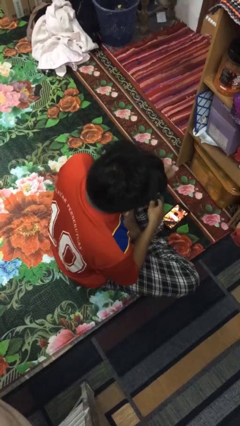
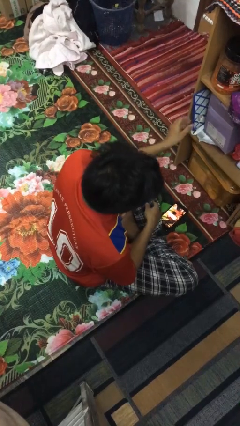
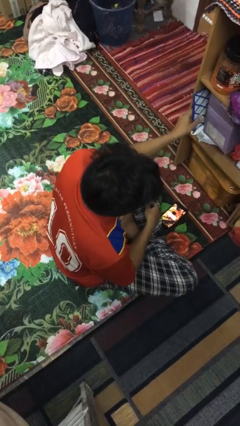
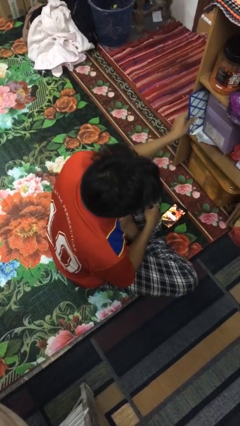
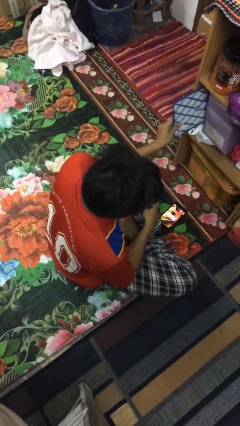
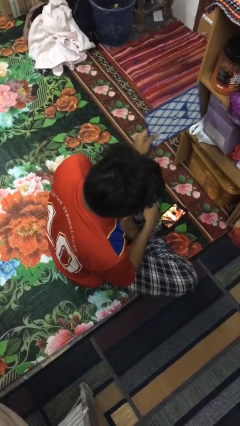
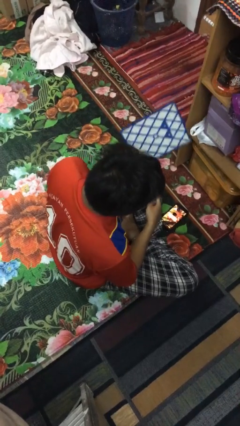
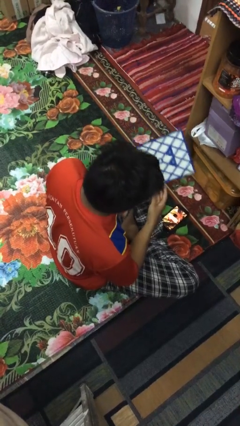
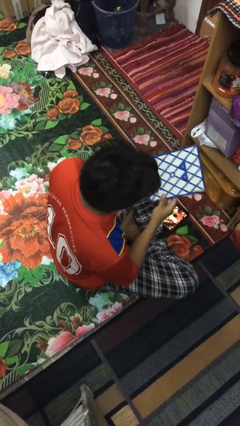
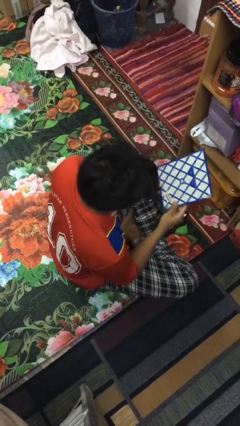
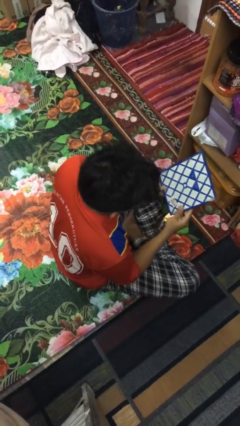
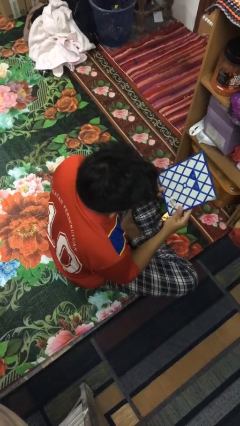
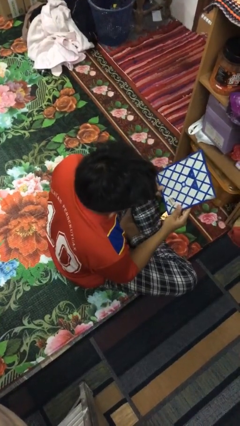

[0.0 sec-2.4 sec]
person picks up object from cabinet

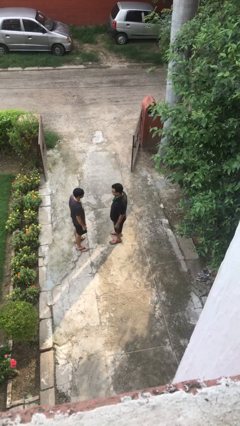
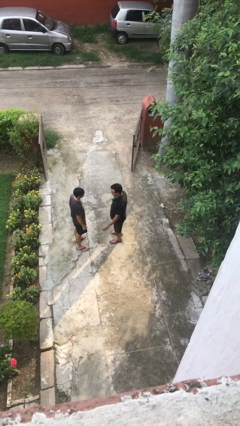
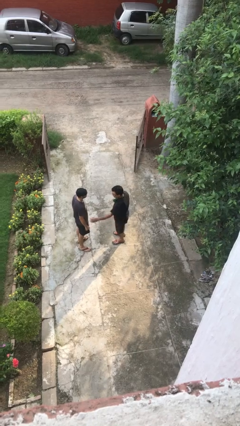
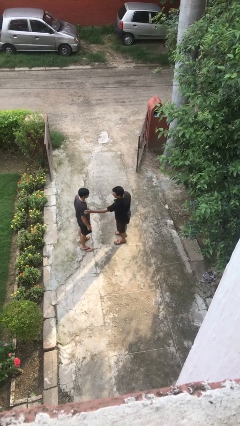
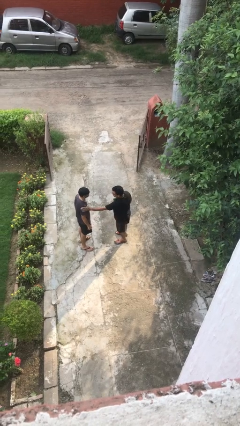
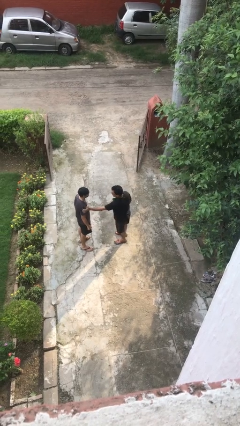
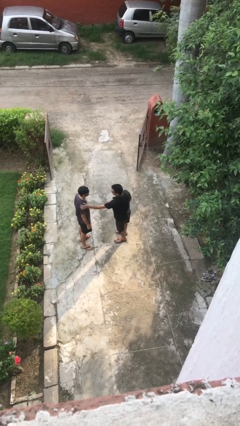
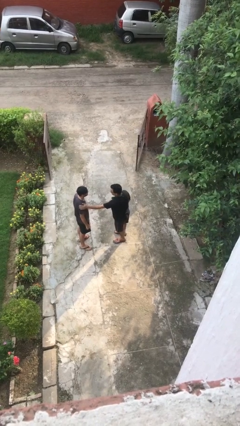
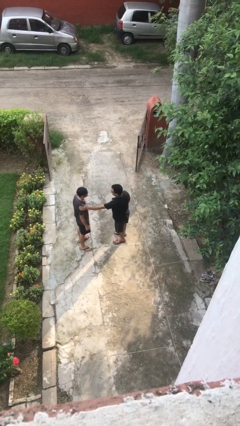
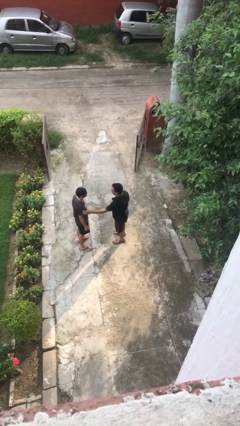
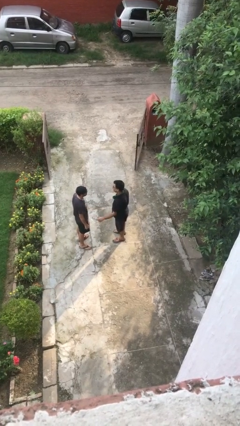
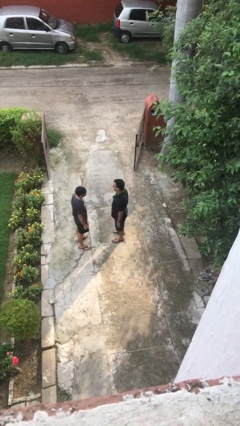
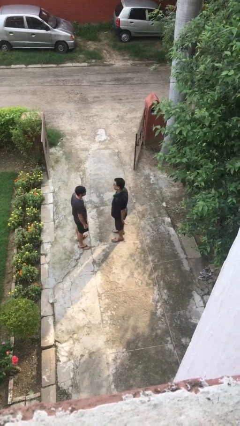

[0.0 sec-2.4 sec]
person pounds shoulders of person

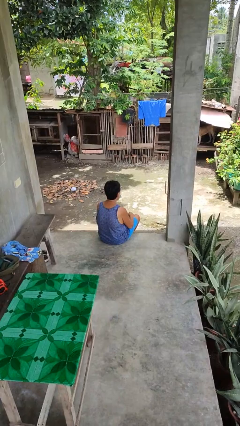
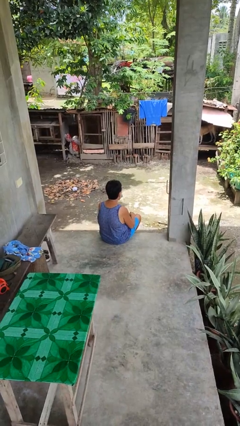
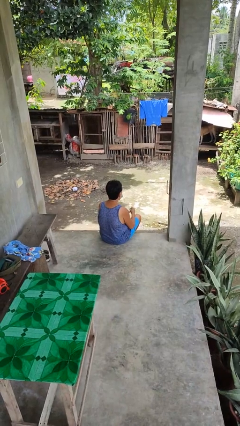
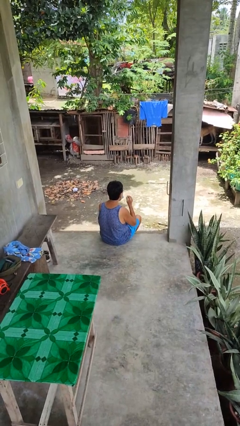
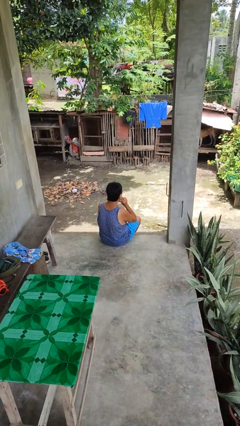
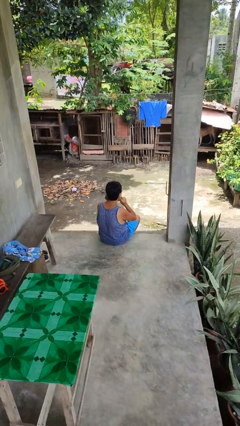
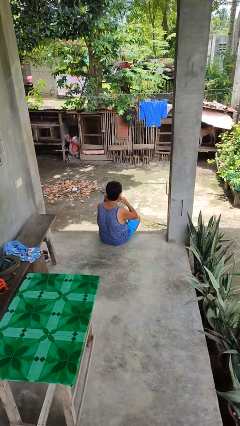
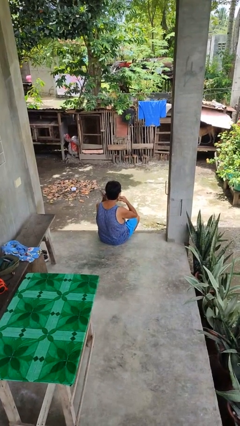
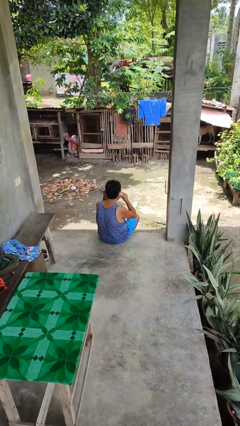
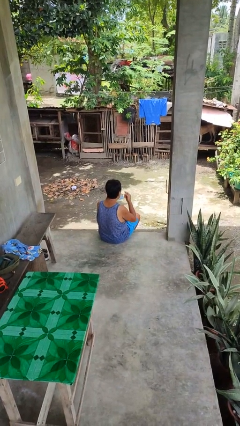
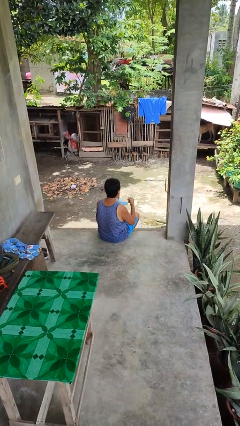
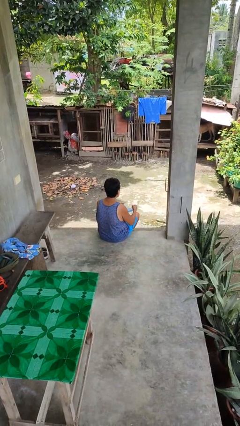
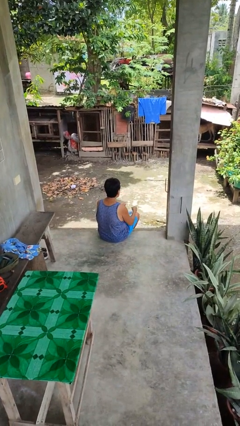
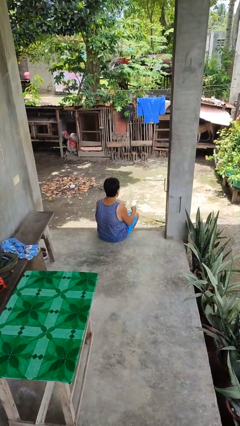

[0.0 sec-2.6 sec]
person takes off facemask

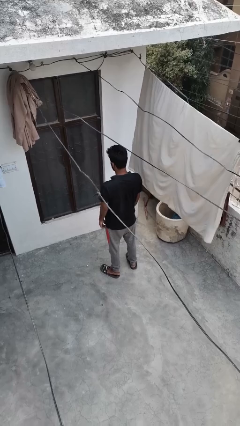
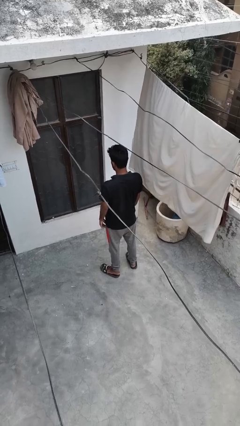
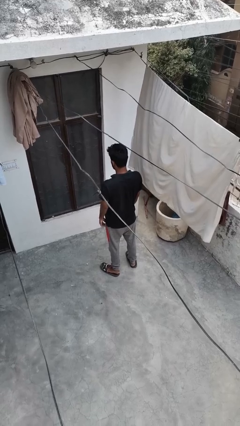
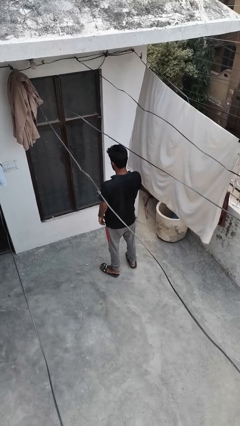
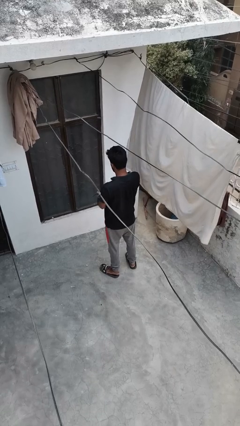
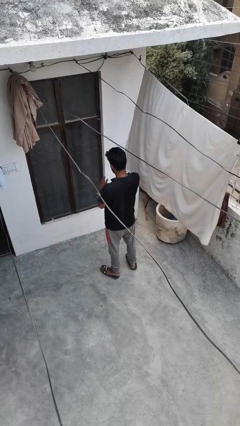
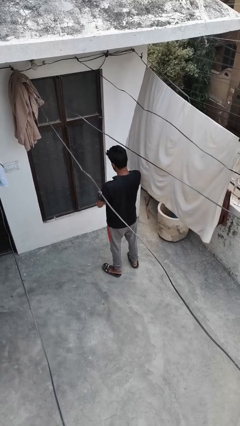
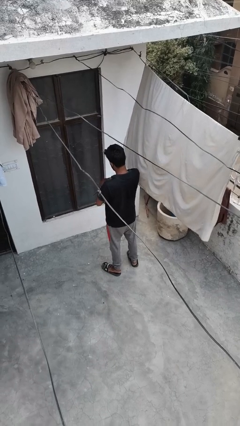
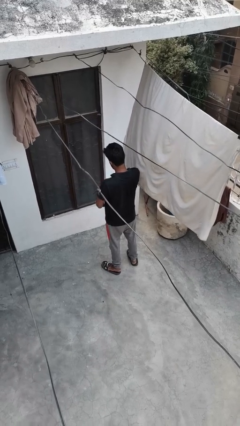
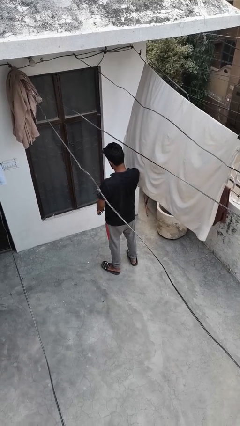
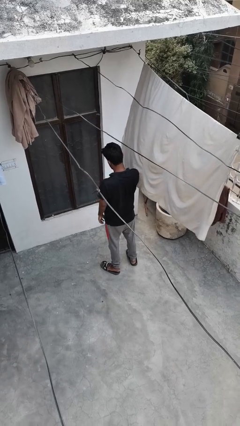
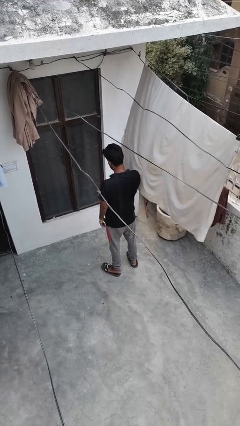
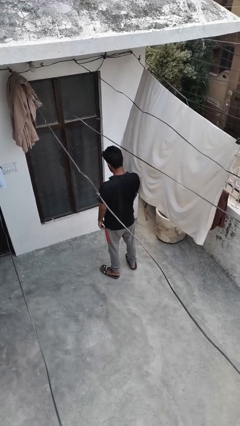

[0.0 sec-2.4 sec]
person swats bug

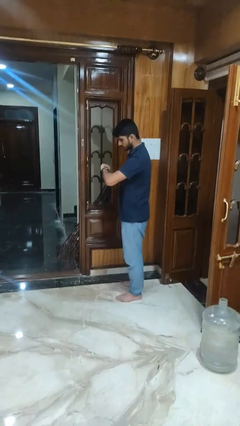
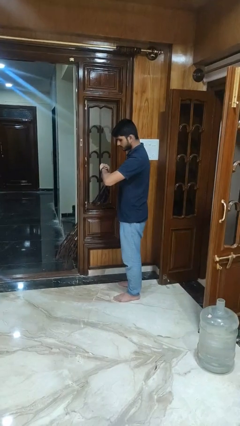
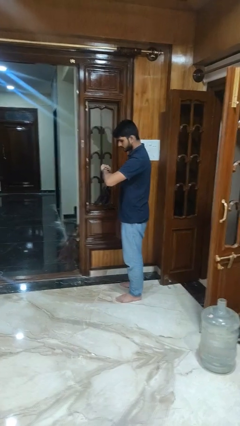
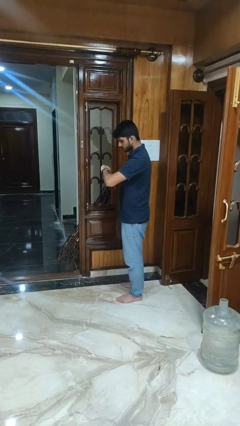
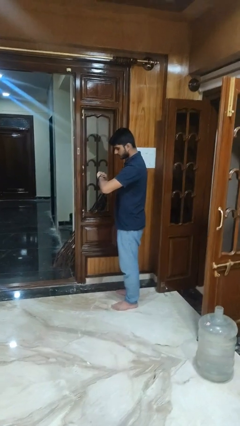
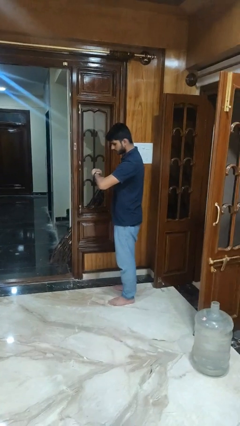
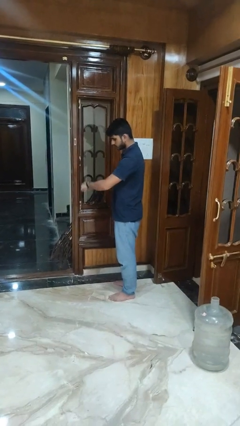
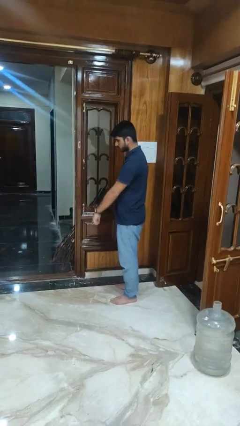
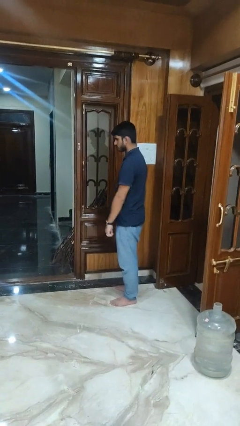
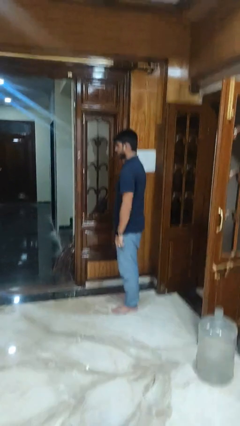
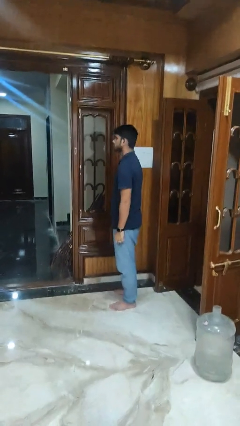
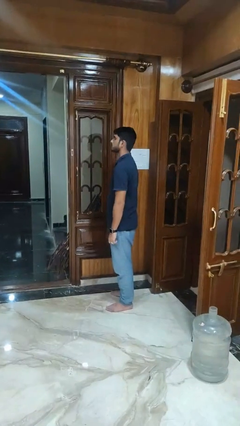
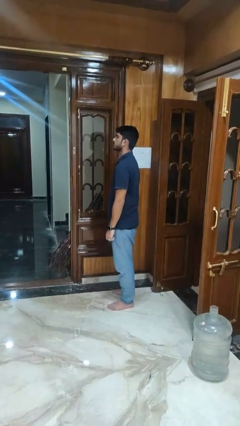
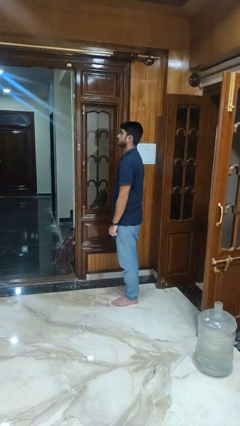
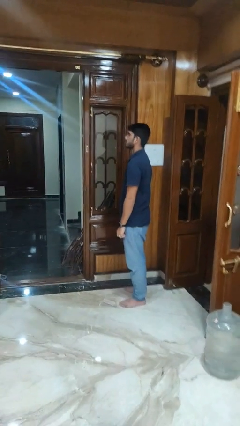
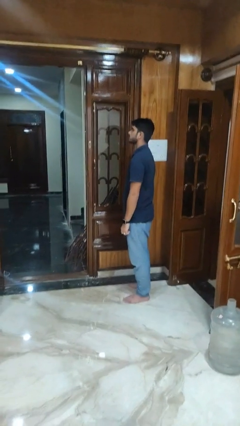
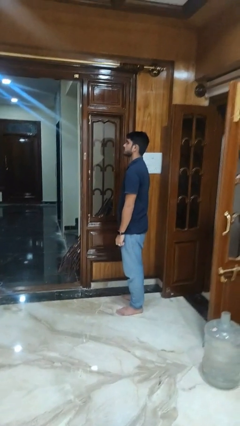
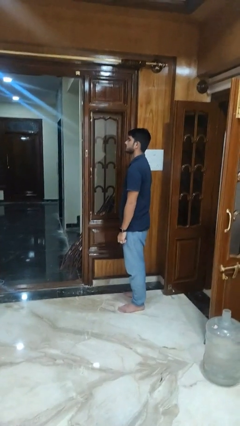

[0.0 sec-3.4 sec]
person looks at wristwatch

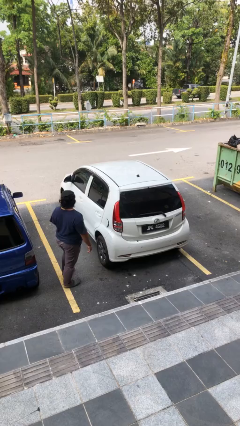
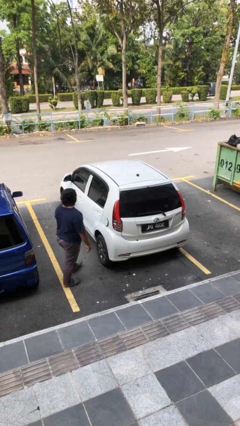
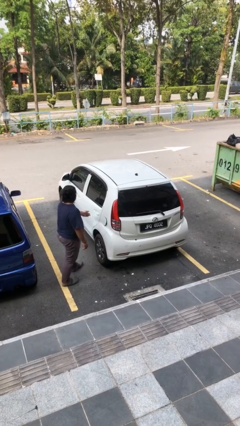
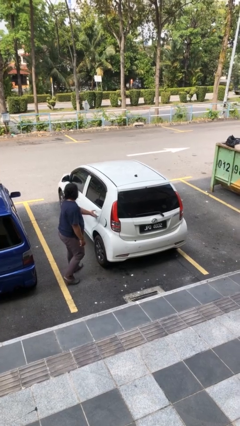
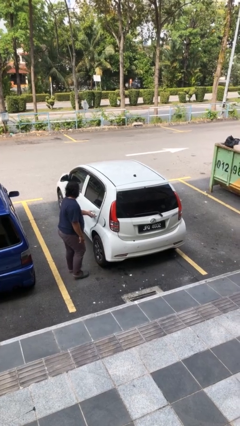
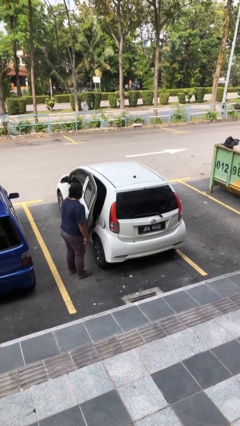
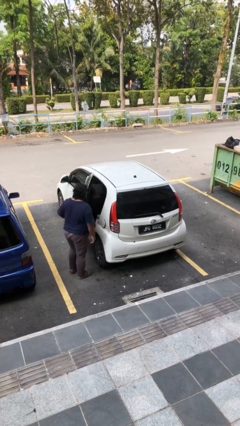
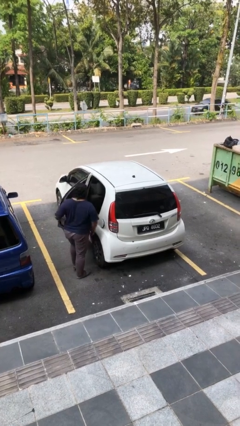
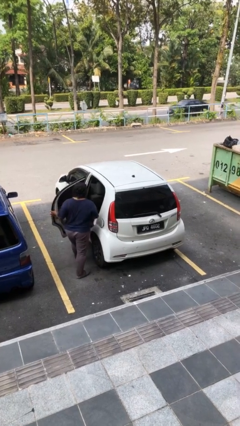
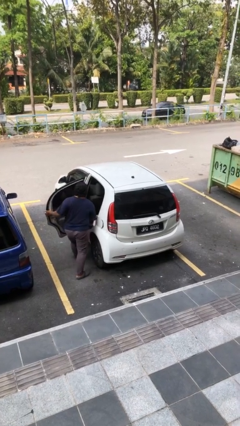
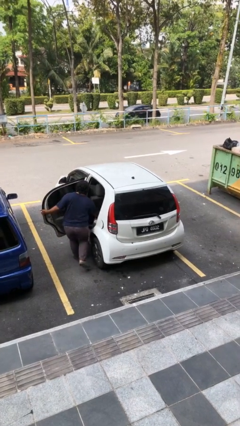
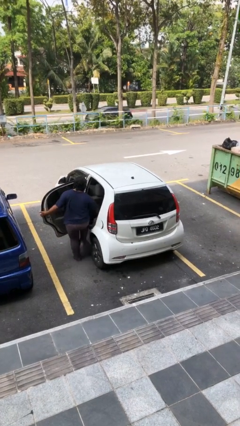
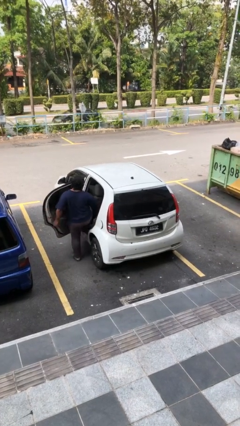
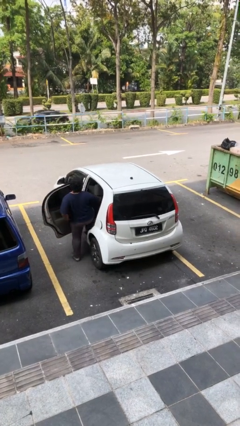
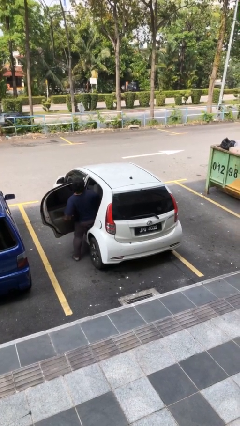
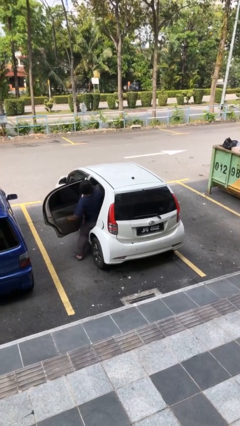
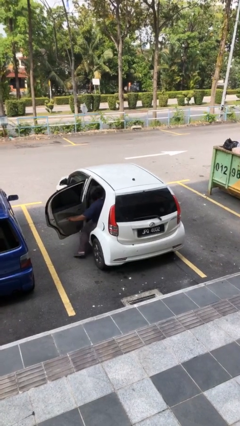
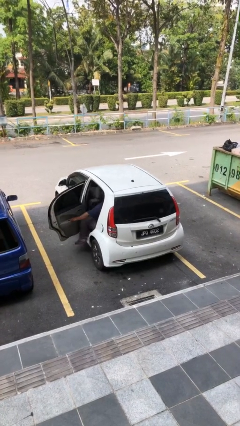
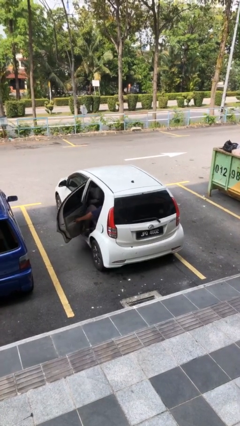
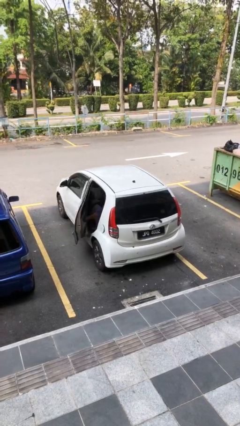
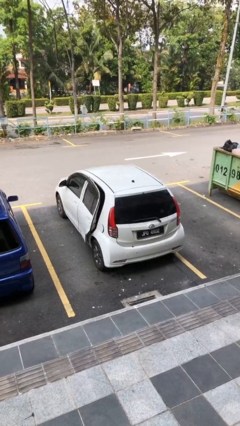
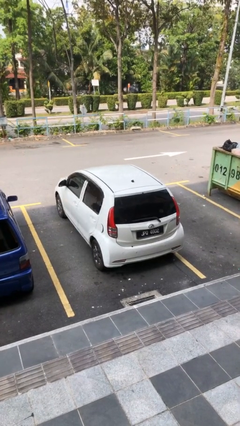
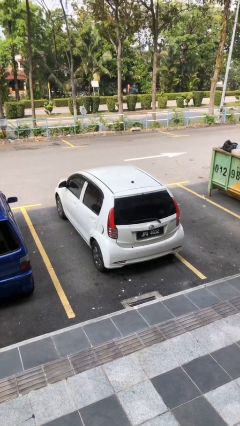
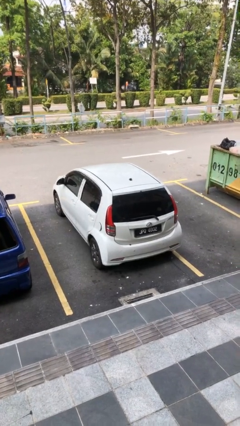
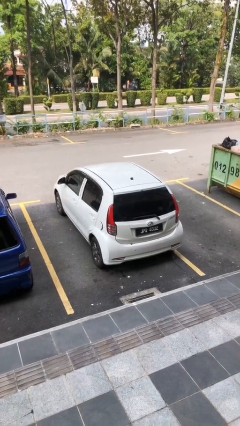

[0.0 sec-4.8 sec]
car picks up person
